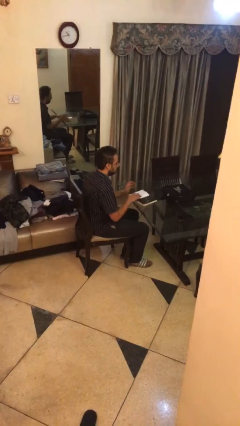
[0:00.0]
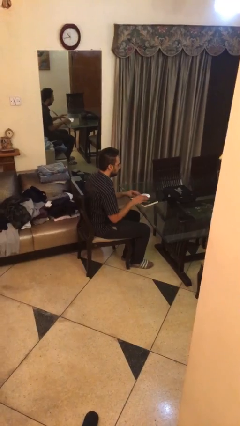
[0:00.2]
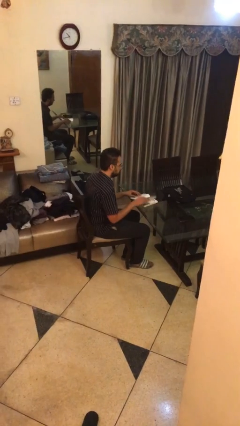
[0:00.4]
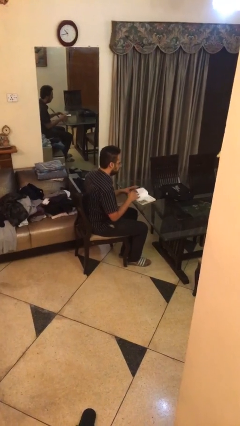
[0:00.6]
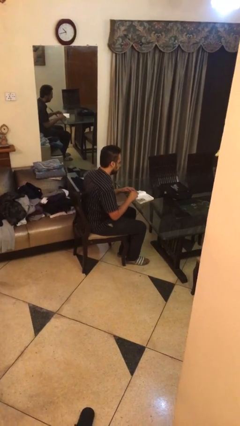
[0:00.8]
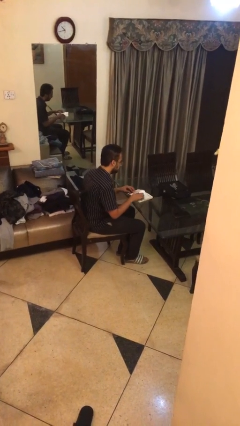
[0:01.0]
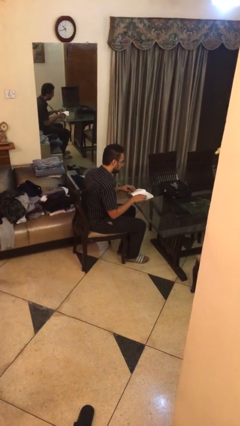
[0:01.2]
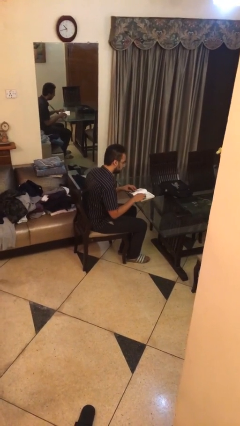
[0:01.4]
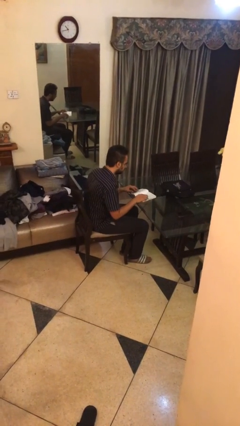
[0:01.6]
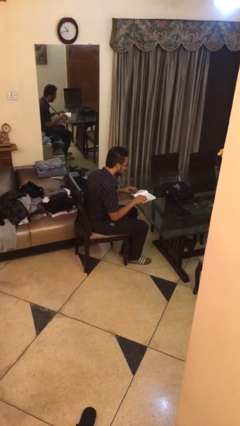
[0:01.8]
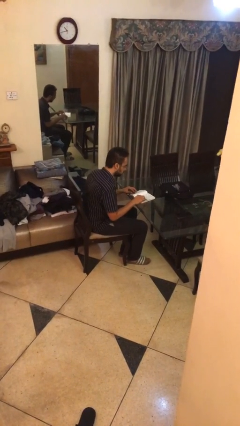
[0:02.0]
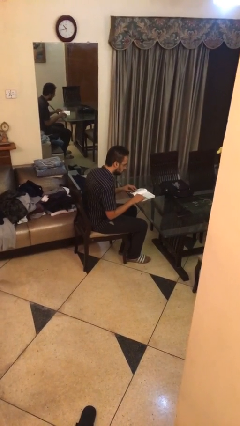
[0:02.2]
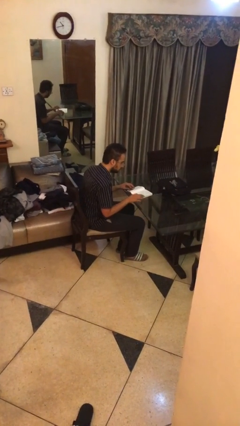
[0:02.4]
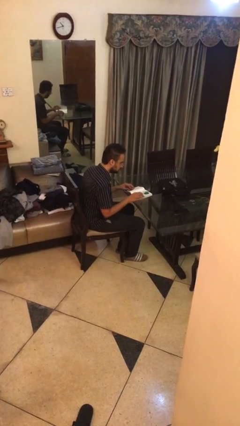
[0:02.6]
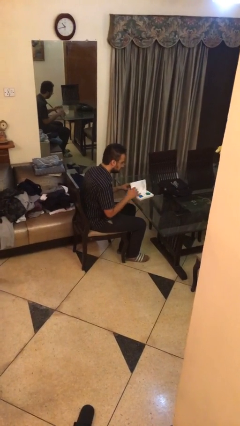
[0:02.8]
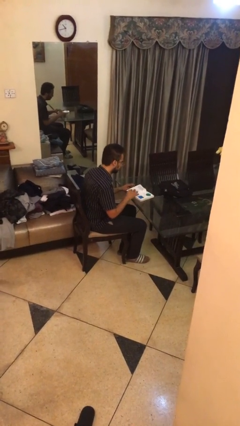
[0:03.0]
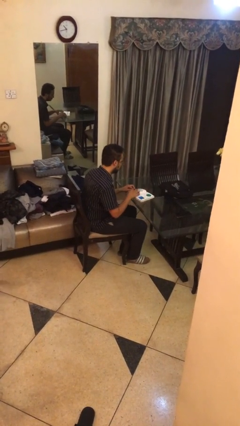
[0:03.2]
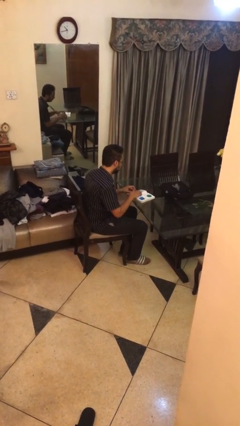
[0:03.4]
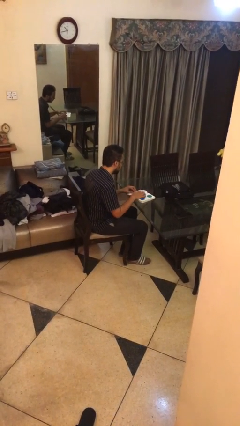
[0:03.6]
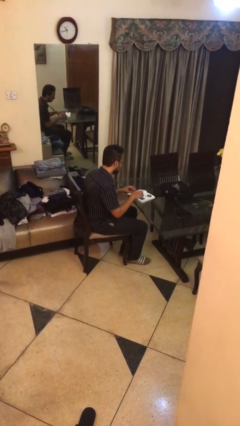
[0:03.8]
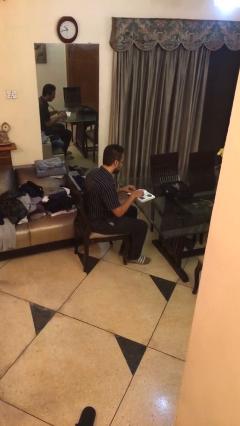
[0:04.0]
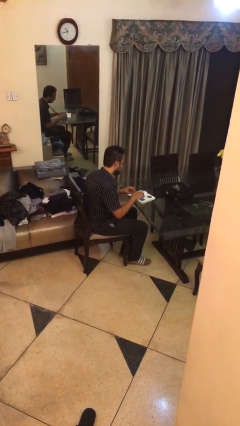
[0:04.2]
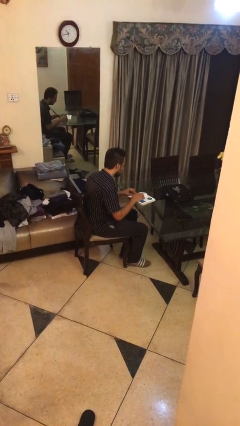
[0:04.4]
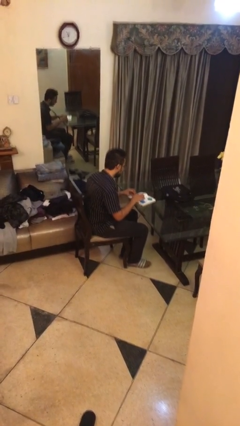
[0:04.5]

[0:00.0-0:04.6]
person reads document

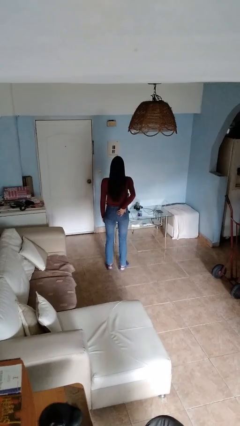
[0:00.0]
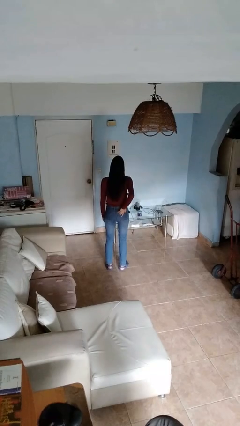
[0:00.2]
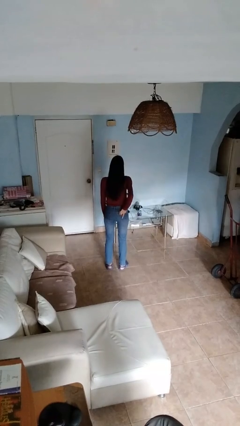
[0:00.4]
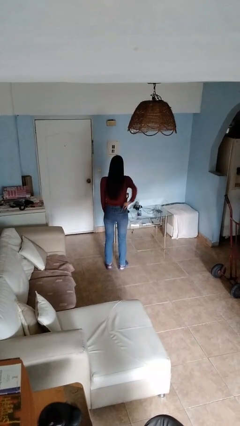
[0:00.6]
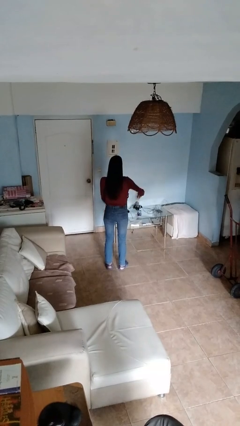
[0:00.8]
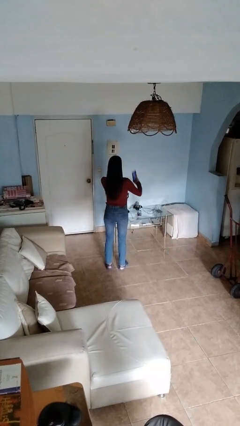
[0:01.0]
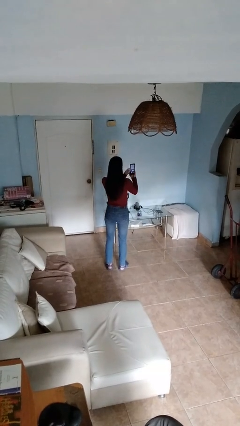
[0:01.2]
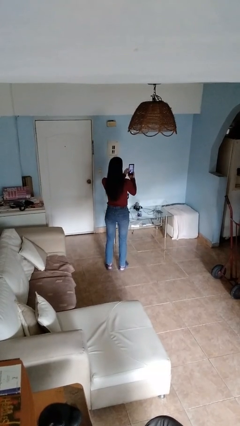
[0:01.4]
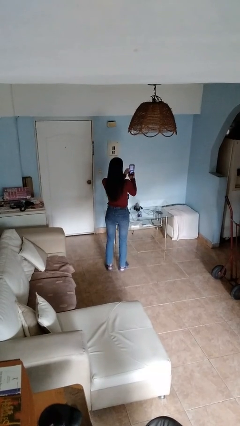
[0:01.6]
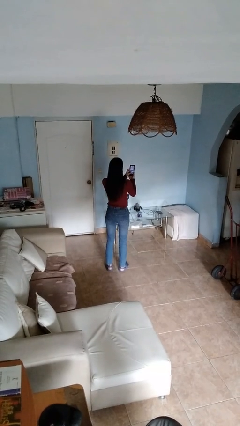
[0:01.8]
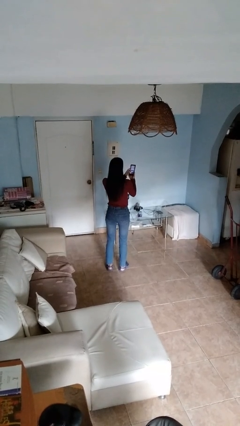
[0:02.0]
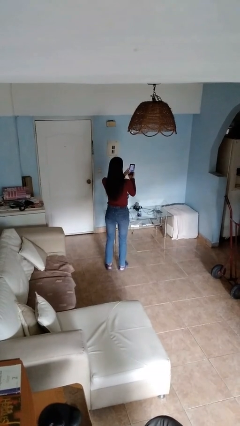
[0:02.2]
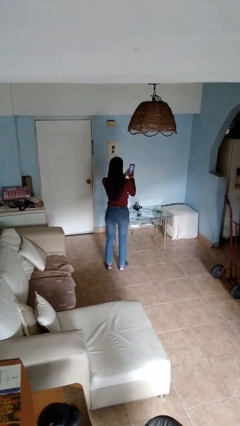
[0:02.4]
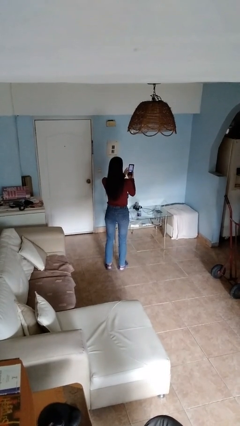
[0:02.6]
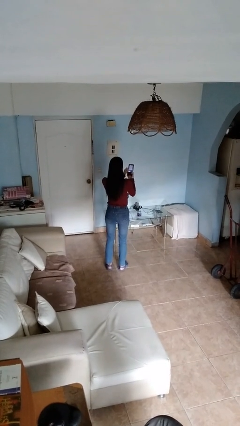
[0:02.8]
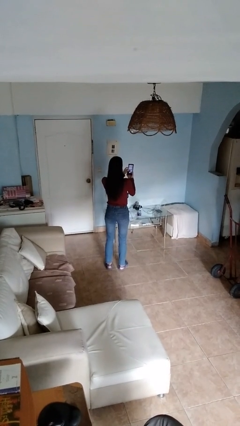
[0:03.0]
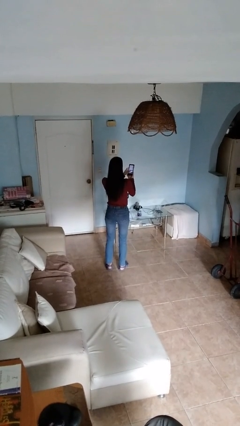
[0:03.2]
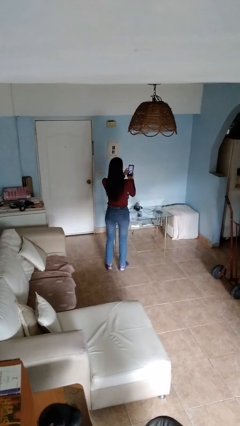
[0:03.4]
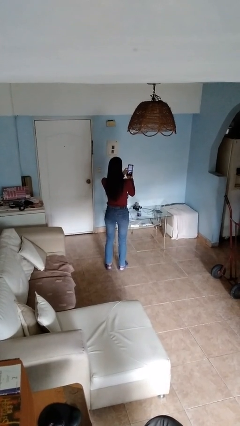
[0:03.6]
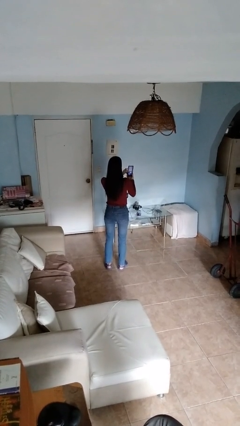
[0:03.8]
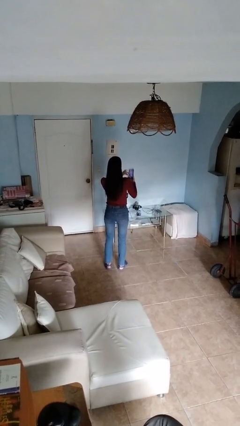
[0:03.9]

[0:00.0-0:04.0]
person takes phone from pocket

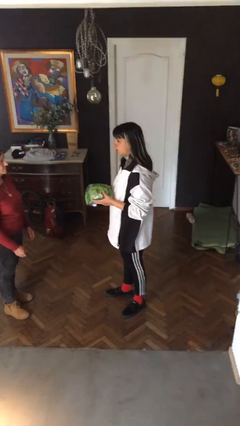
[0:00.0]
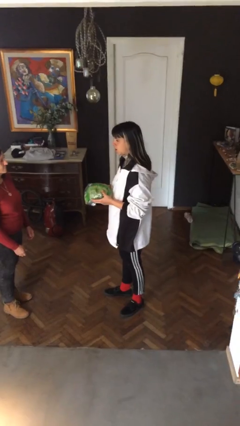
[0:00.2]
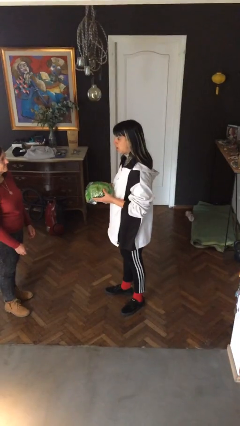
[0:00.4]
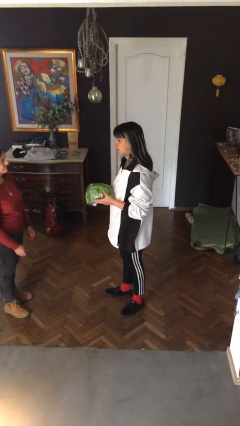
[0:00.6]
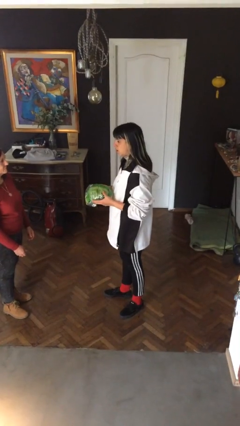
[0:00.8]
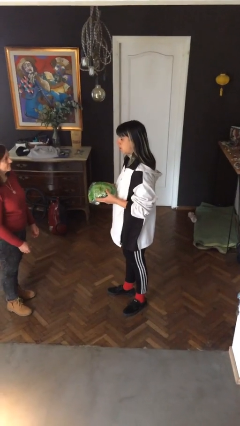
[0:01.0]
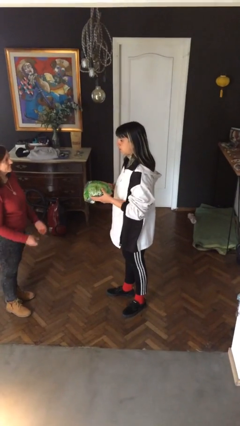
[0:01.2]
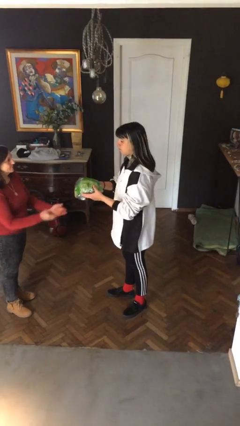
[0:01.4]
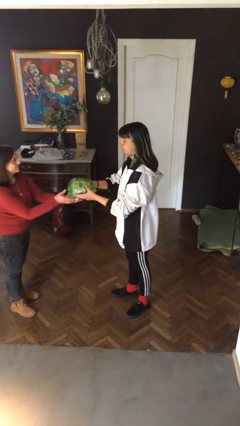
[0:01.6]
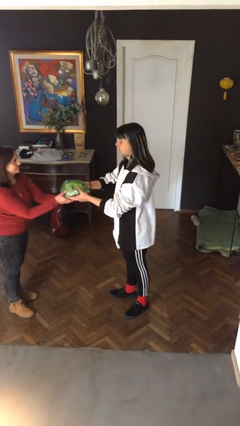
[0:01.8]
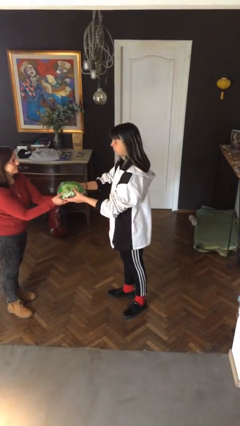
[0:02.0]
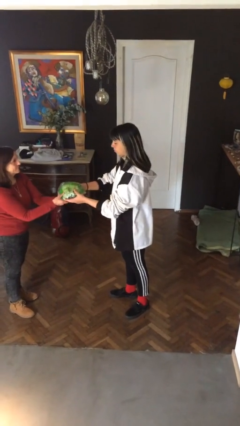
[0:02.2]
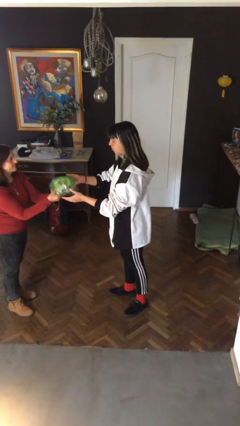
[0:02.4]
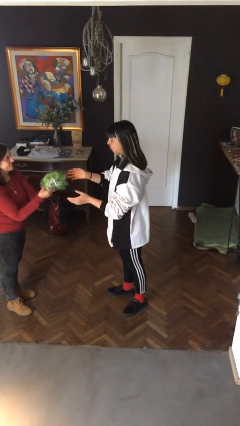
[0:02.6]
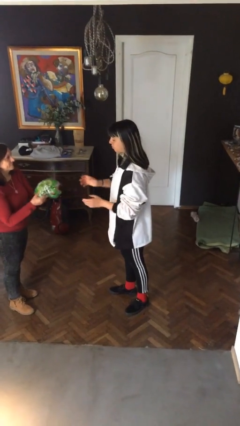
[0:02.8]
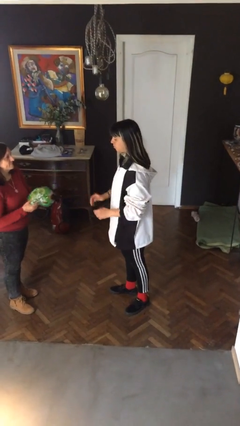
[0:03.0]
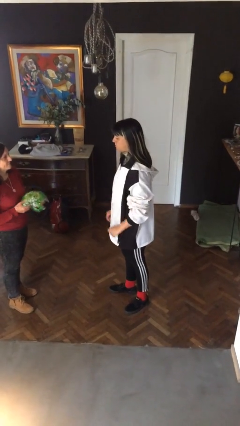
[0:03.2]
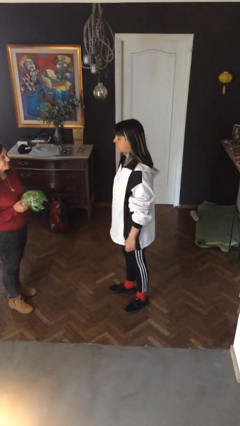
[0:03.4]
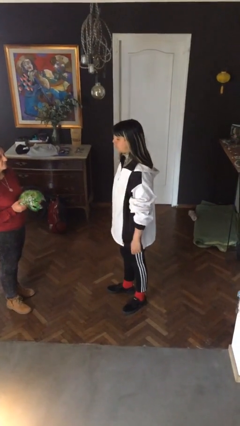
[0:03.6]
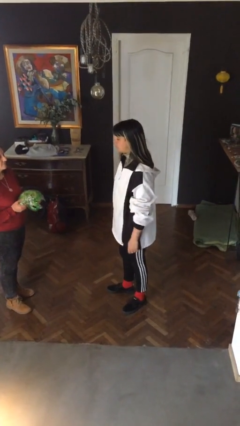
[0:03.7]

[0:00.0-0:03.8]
person transfers object to person

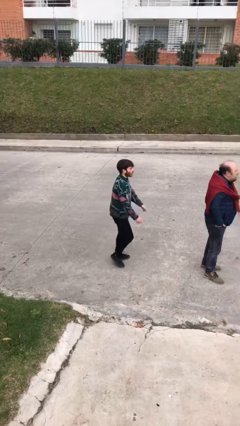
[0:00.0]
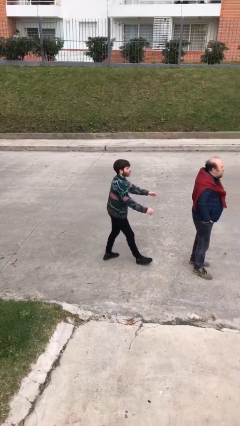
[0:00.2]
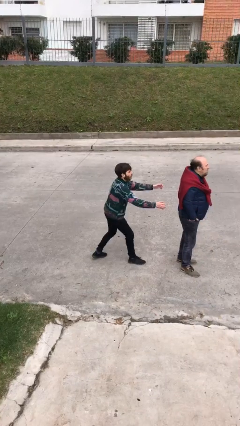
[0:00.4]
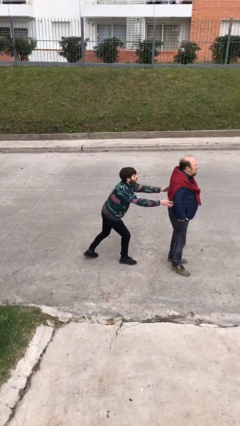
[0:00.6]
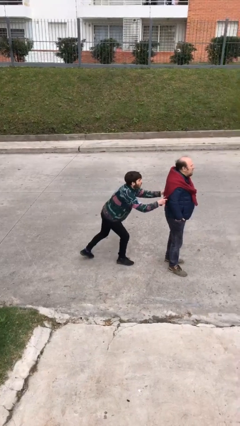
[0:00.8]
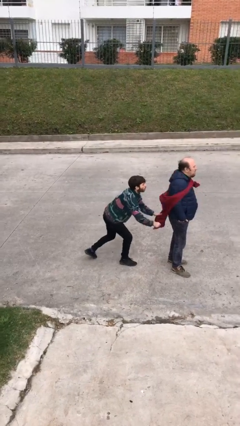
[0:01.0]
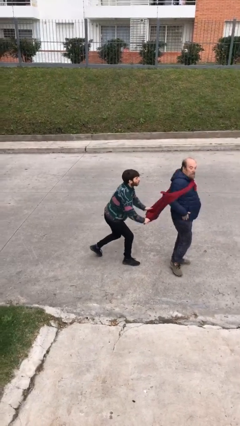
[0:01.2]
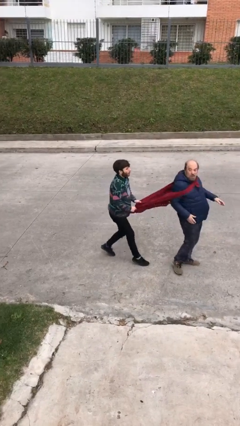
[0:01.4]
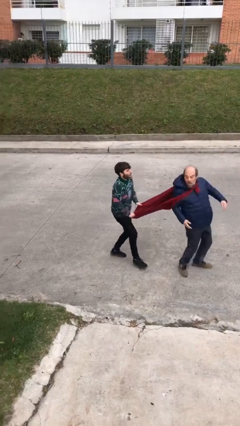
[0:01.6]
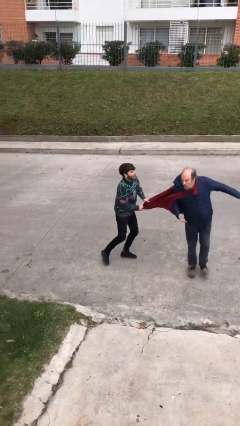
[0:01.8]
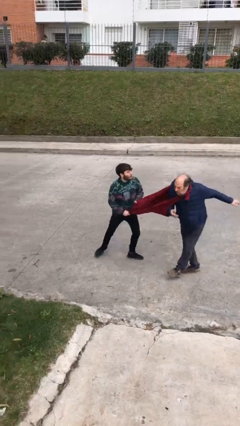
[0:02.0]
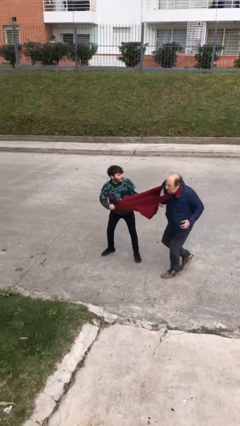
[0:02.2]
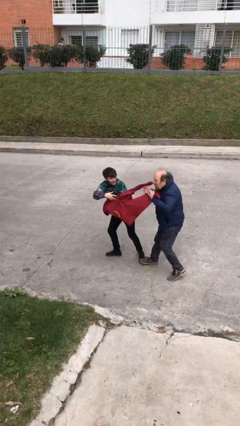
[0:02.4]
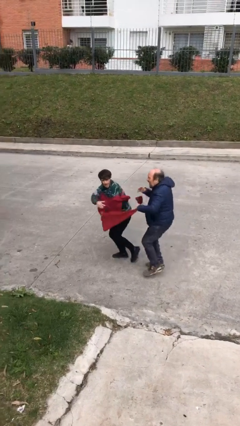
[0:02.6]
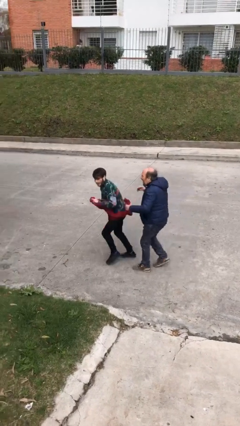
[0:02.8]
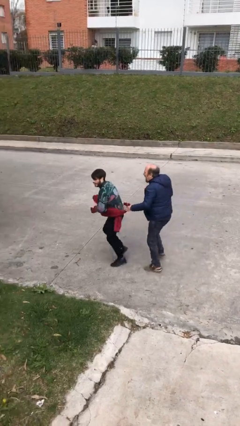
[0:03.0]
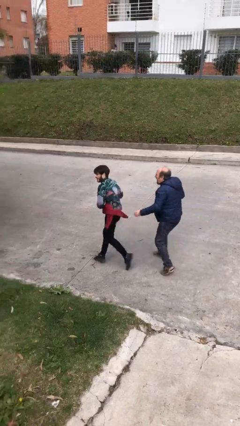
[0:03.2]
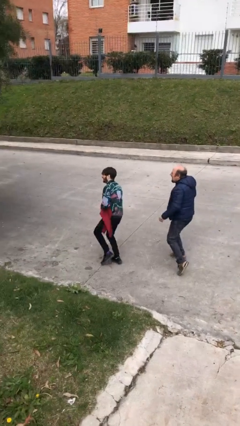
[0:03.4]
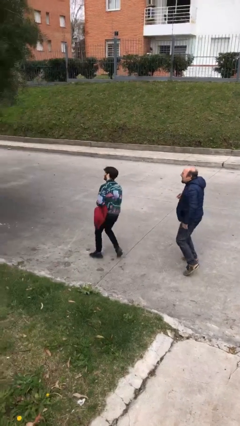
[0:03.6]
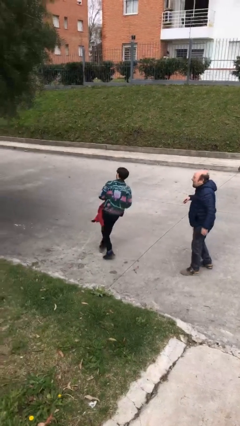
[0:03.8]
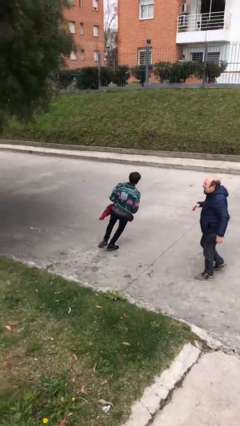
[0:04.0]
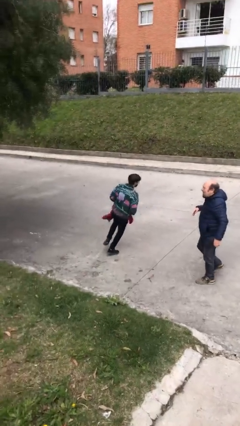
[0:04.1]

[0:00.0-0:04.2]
person steals object from person

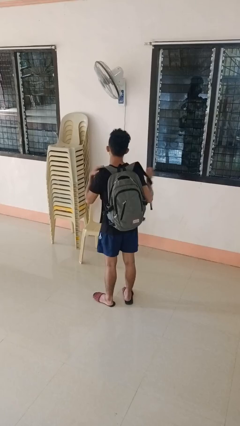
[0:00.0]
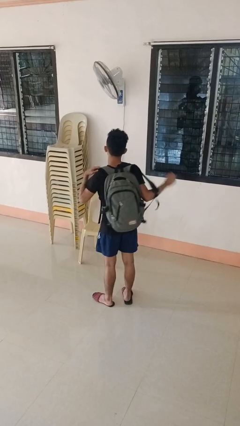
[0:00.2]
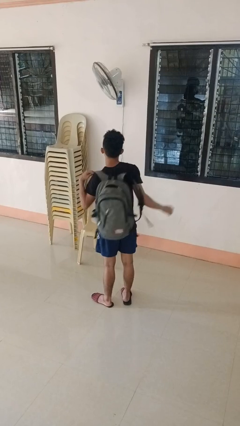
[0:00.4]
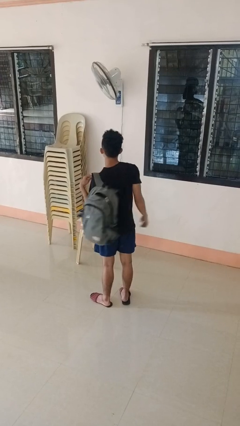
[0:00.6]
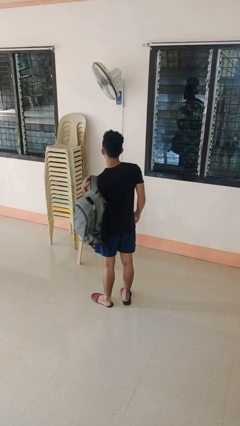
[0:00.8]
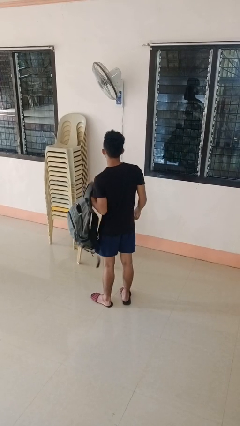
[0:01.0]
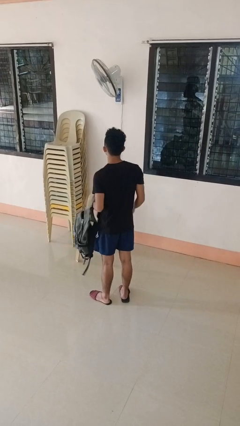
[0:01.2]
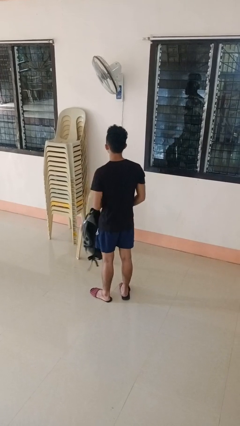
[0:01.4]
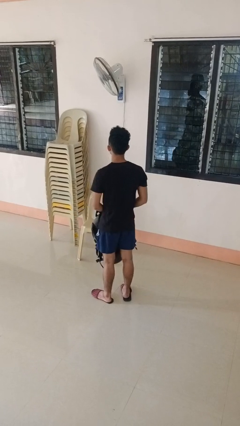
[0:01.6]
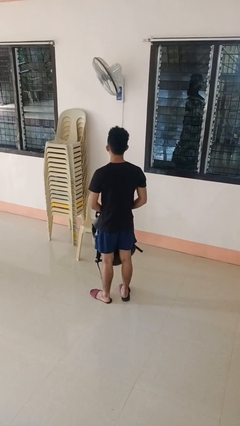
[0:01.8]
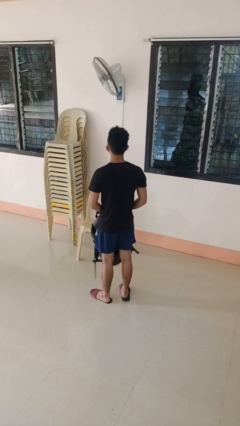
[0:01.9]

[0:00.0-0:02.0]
person takes off backpack
